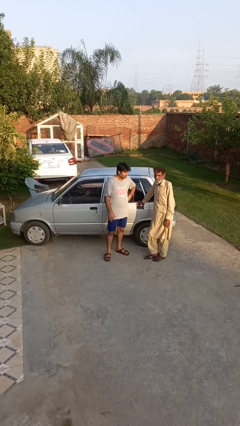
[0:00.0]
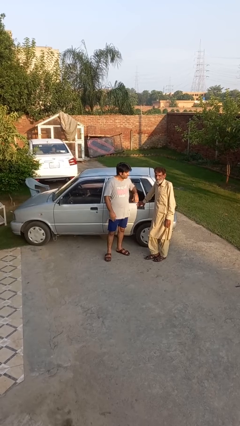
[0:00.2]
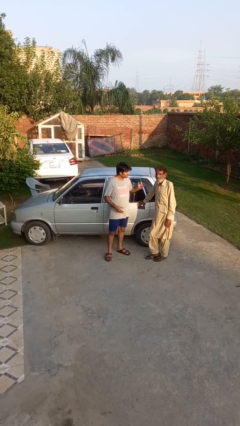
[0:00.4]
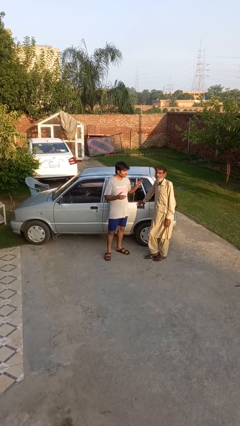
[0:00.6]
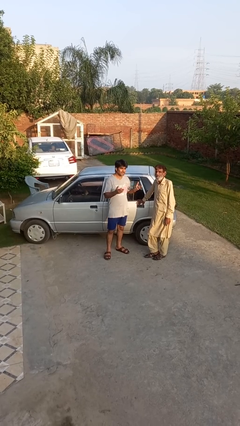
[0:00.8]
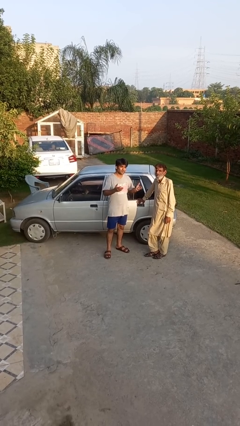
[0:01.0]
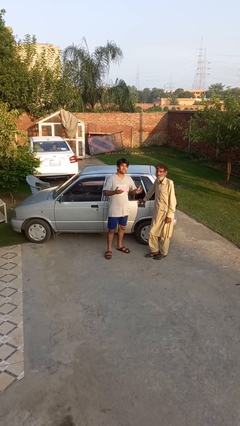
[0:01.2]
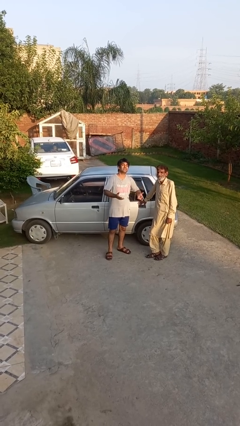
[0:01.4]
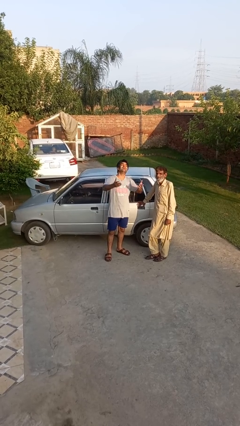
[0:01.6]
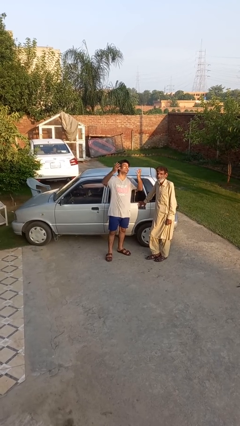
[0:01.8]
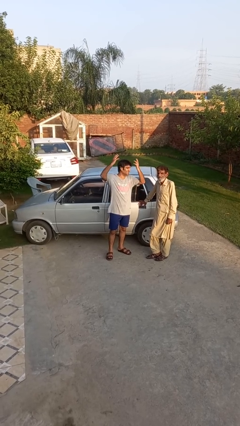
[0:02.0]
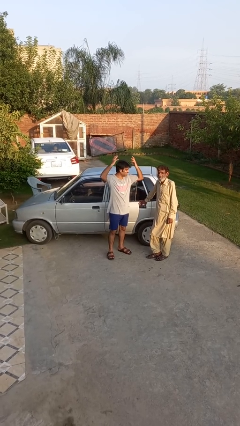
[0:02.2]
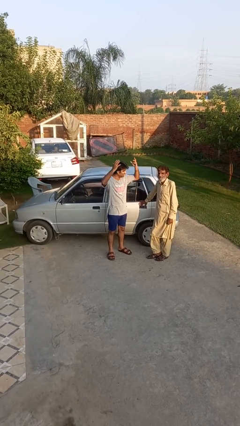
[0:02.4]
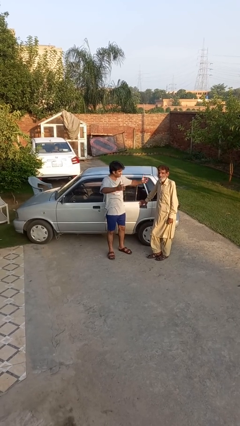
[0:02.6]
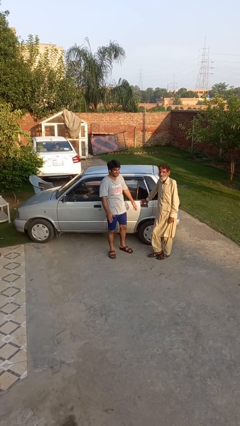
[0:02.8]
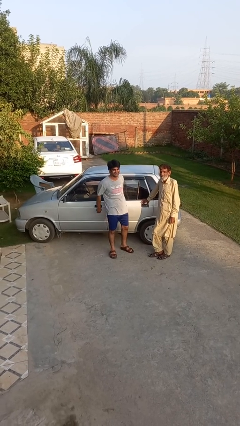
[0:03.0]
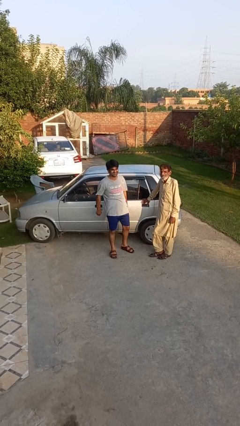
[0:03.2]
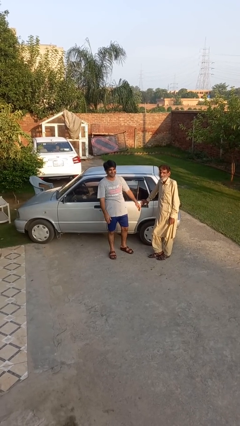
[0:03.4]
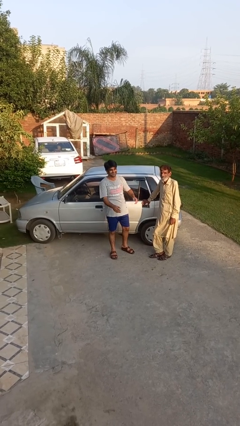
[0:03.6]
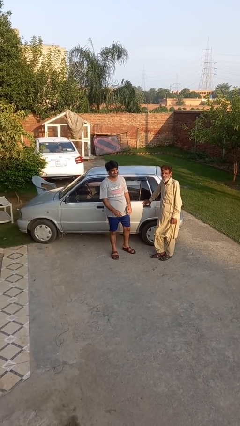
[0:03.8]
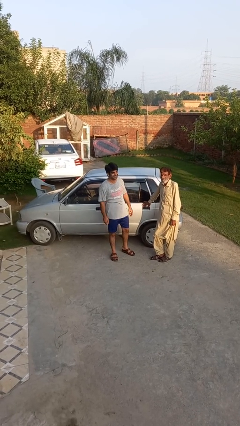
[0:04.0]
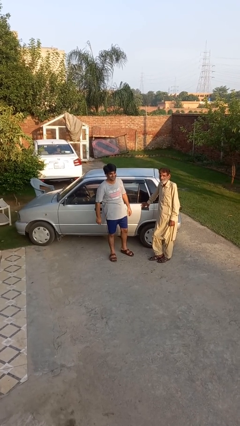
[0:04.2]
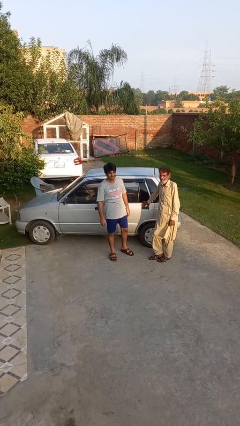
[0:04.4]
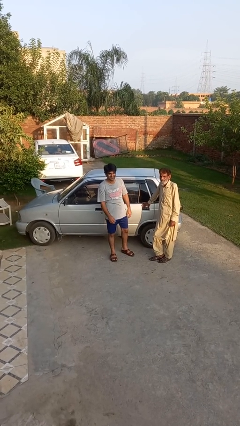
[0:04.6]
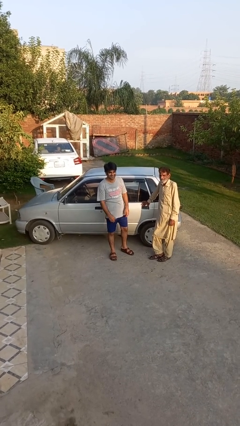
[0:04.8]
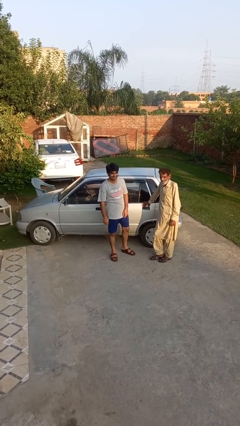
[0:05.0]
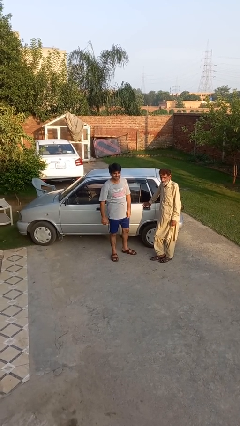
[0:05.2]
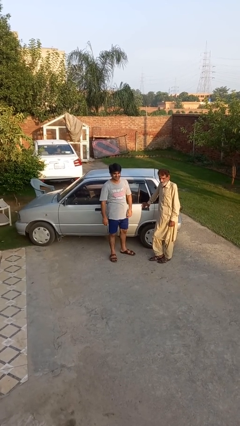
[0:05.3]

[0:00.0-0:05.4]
person laughs with person

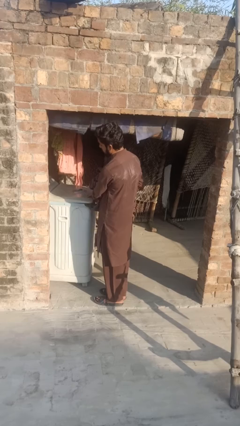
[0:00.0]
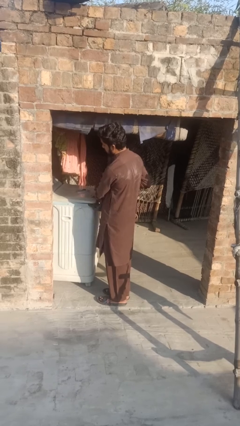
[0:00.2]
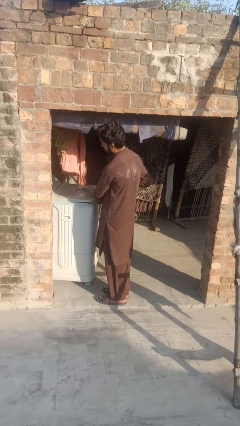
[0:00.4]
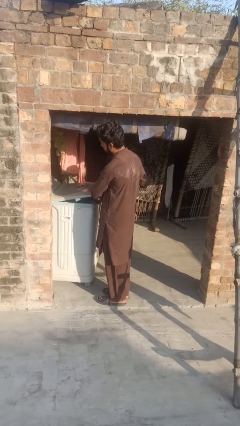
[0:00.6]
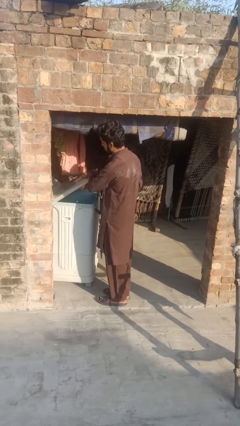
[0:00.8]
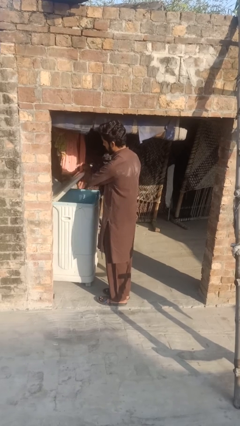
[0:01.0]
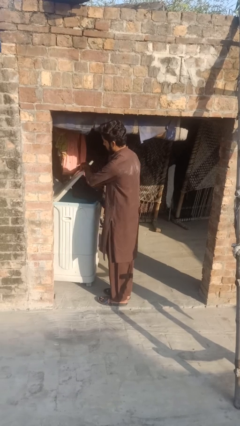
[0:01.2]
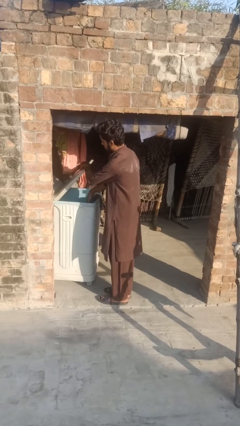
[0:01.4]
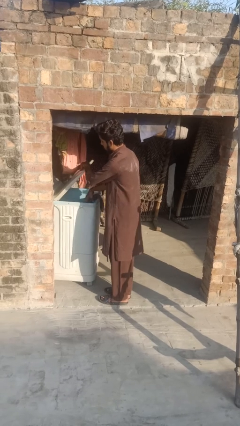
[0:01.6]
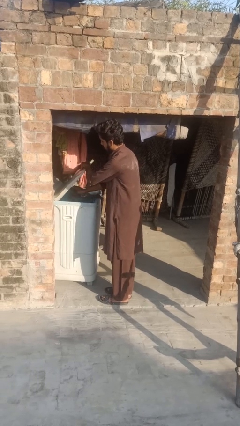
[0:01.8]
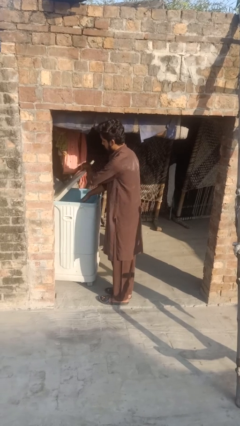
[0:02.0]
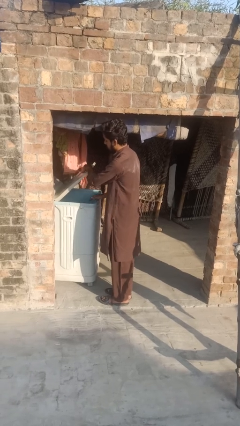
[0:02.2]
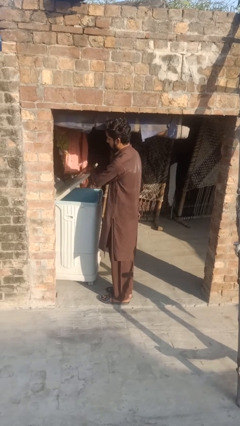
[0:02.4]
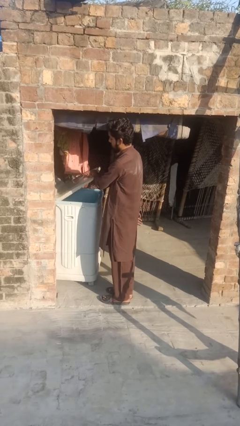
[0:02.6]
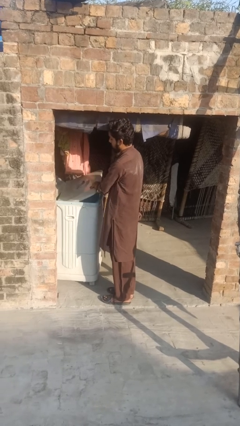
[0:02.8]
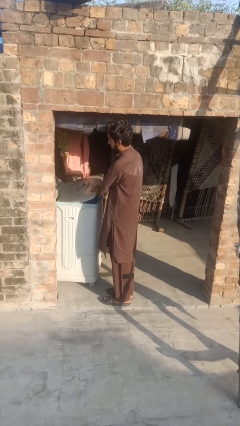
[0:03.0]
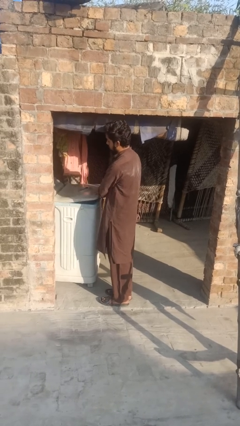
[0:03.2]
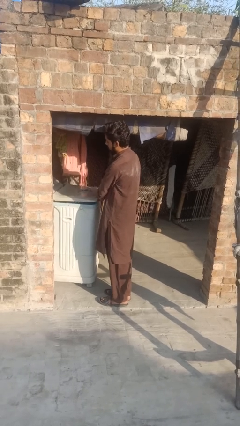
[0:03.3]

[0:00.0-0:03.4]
person loads dryer

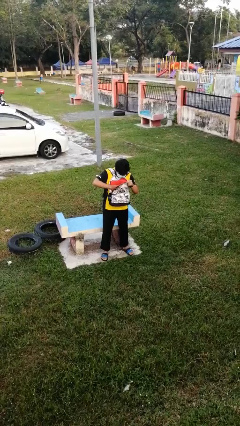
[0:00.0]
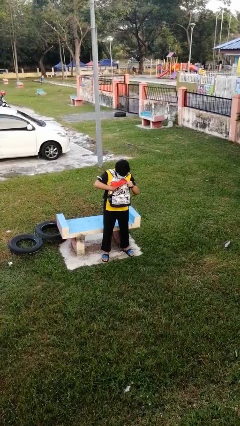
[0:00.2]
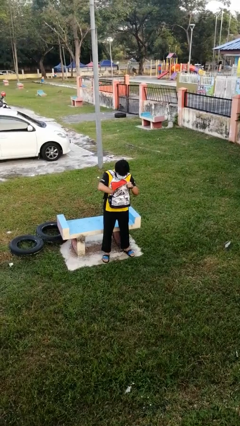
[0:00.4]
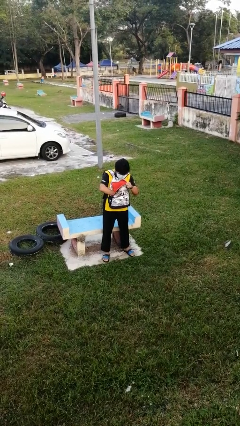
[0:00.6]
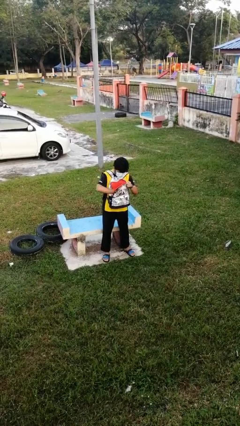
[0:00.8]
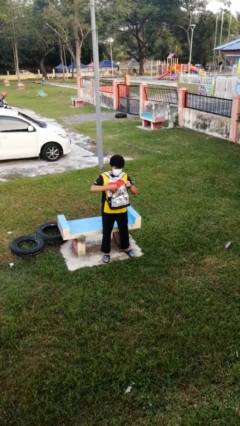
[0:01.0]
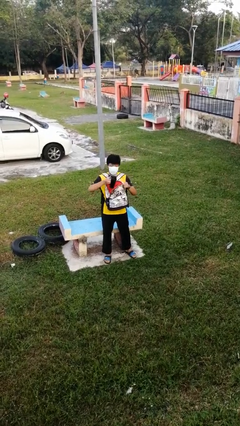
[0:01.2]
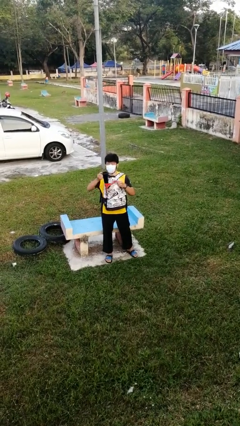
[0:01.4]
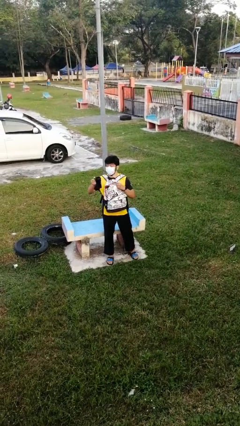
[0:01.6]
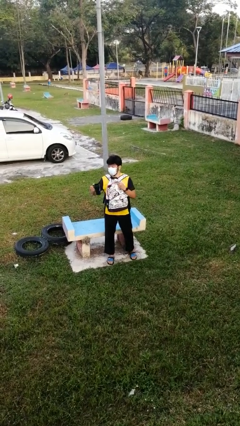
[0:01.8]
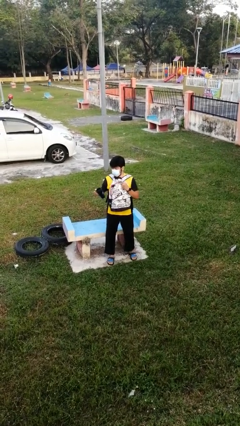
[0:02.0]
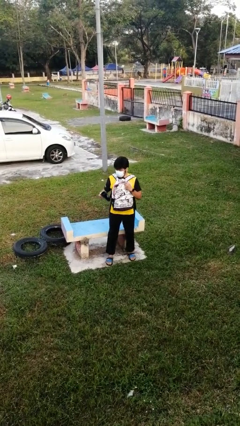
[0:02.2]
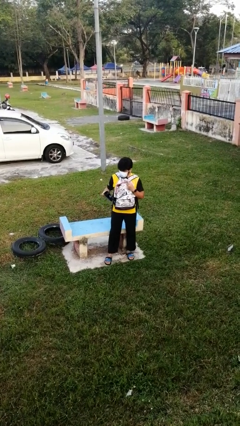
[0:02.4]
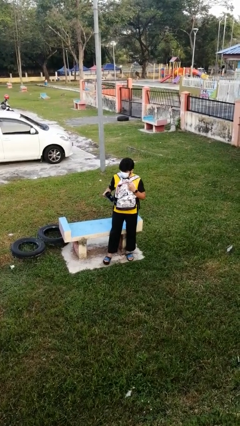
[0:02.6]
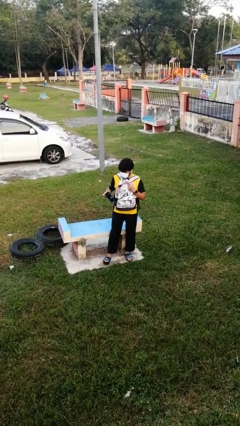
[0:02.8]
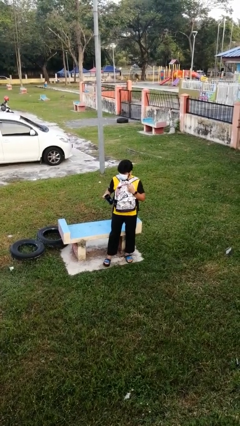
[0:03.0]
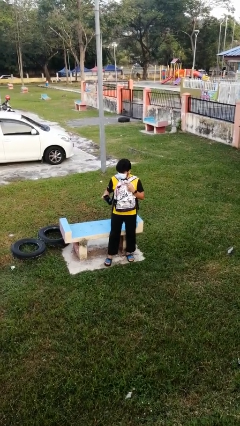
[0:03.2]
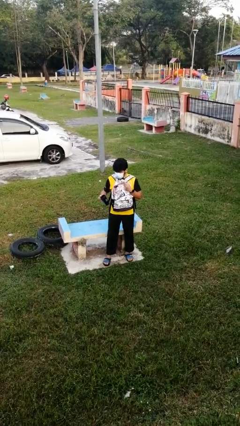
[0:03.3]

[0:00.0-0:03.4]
person takes object from backpack

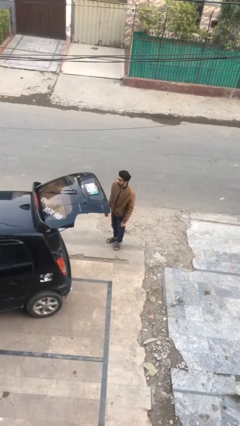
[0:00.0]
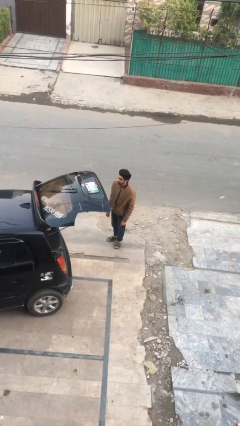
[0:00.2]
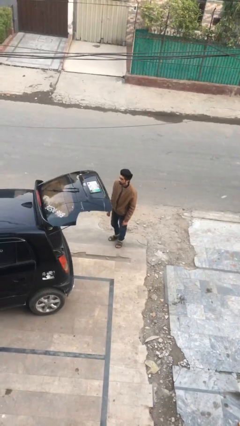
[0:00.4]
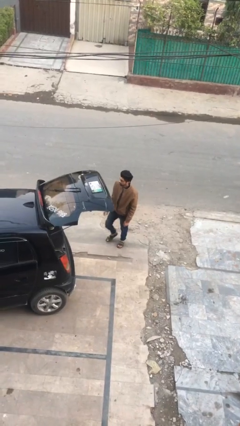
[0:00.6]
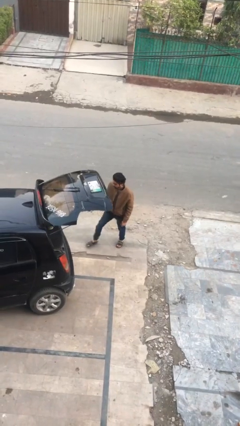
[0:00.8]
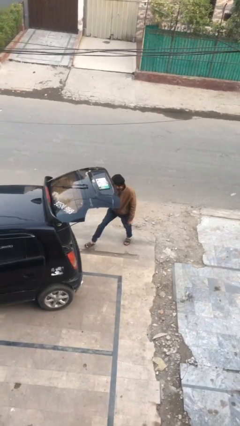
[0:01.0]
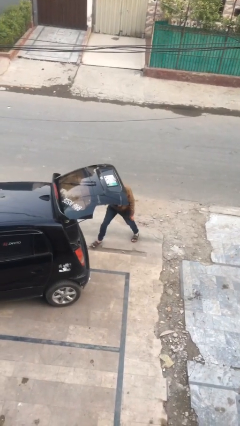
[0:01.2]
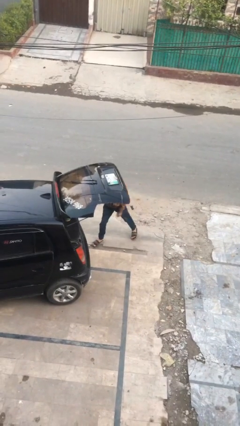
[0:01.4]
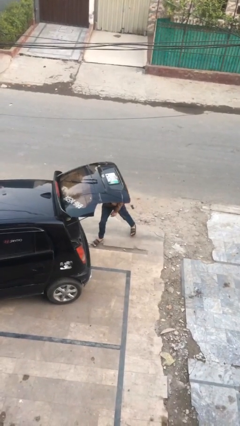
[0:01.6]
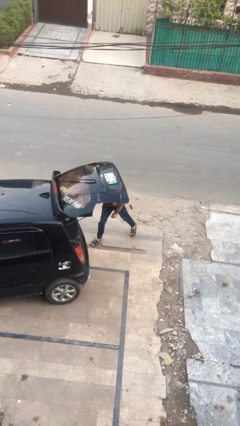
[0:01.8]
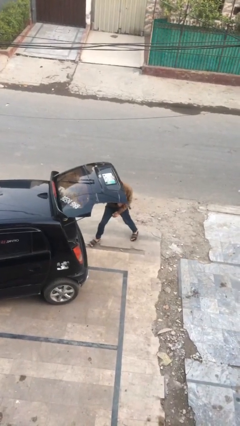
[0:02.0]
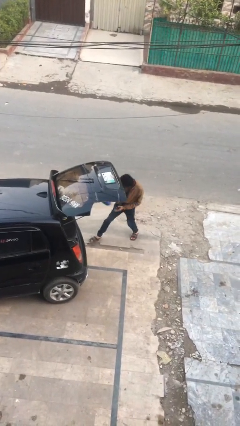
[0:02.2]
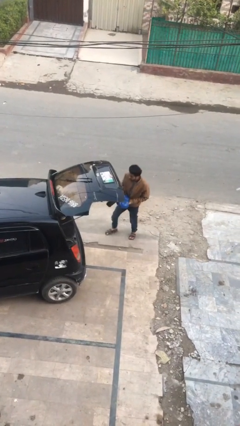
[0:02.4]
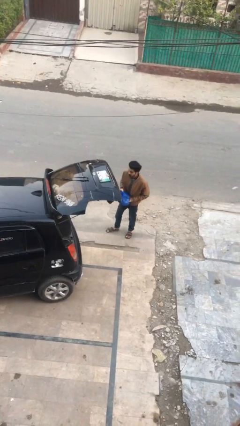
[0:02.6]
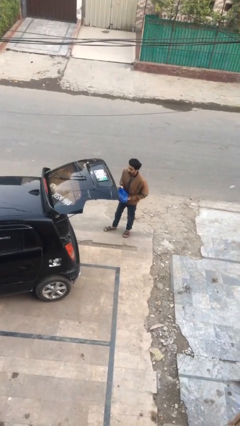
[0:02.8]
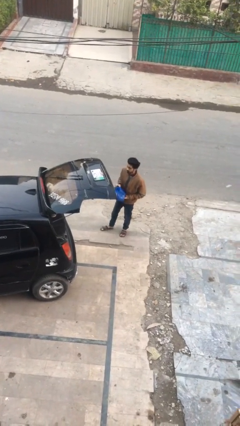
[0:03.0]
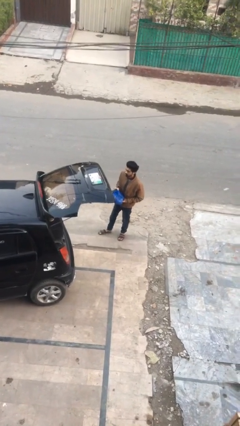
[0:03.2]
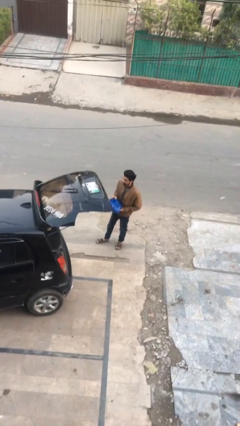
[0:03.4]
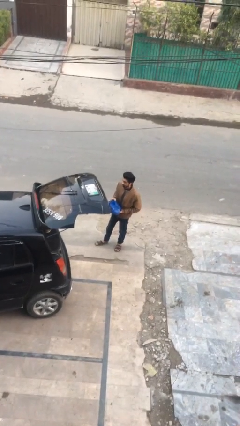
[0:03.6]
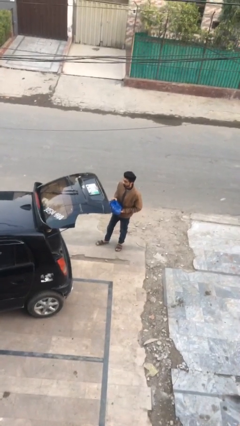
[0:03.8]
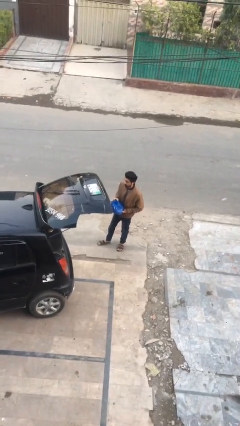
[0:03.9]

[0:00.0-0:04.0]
person unloads car

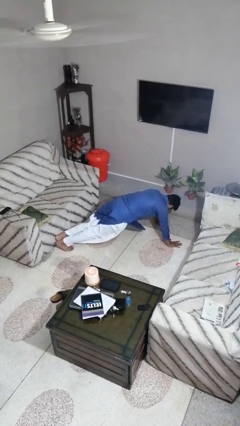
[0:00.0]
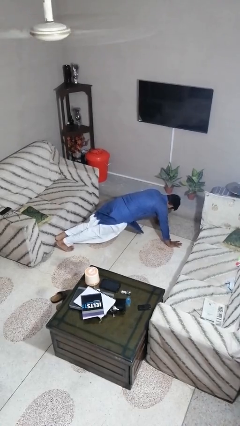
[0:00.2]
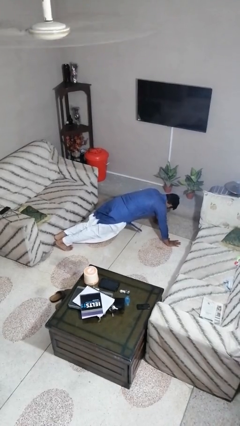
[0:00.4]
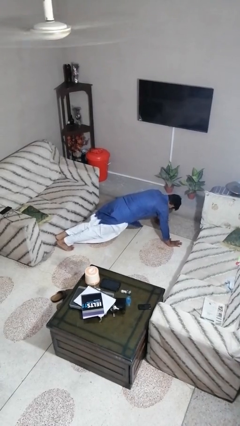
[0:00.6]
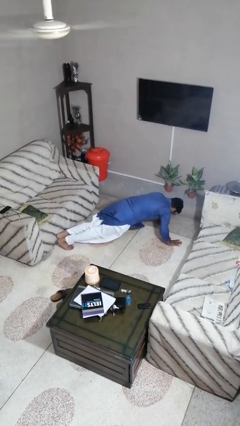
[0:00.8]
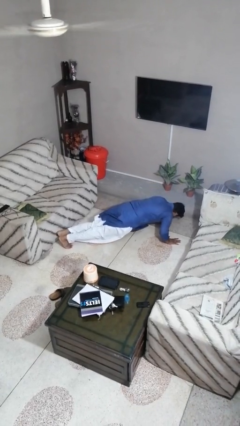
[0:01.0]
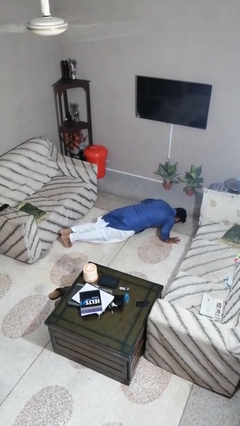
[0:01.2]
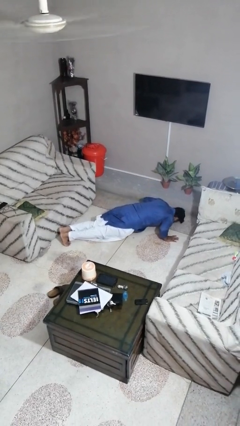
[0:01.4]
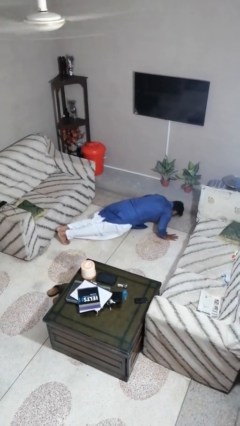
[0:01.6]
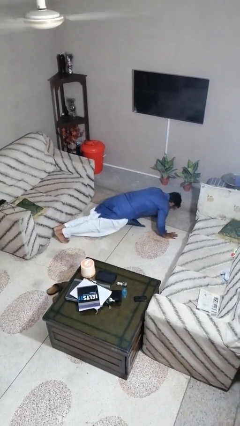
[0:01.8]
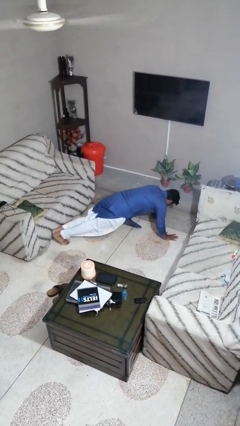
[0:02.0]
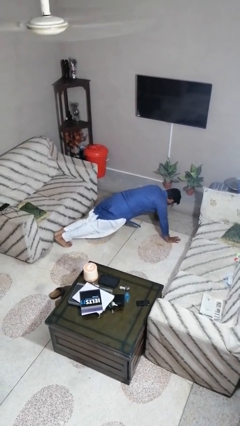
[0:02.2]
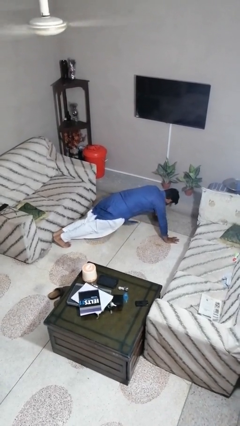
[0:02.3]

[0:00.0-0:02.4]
person exercises with pushup
